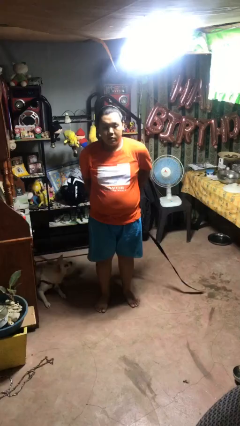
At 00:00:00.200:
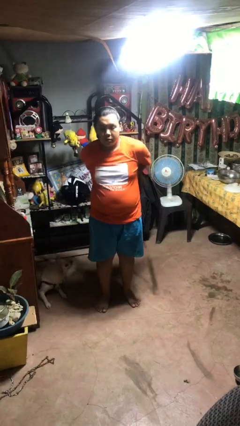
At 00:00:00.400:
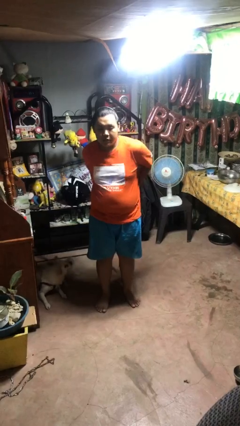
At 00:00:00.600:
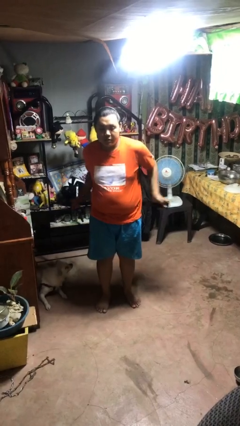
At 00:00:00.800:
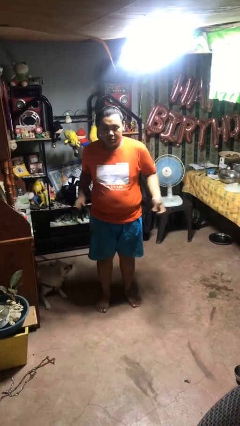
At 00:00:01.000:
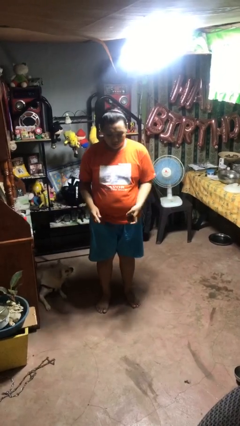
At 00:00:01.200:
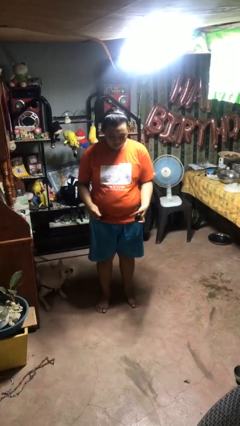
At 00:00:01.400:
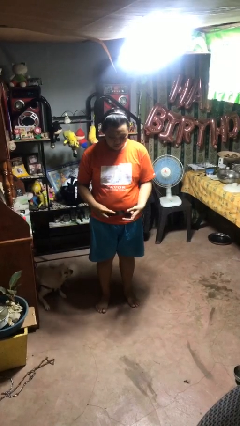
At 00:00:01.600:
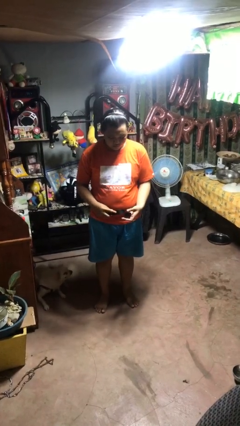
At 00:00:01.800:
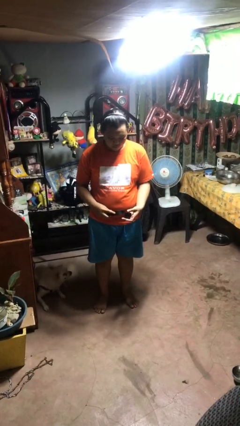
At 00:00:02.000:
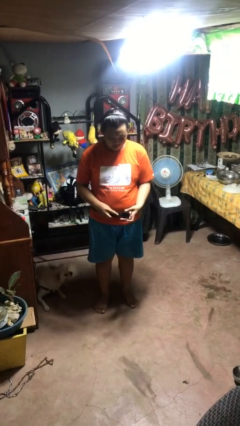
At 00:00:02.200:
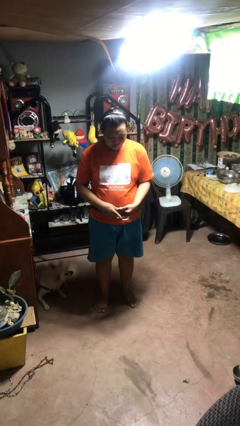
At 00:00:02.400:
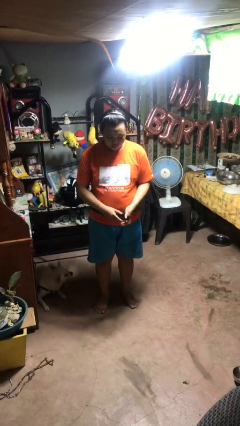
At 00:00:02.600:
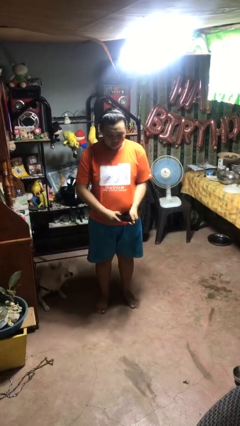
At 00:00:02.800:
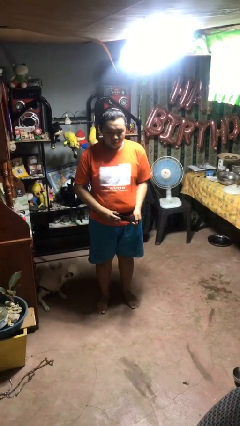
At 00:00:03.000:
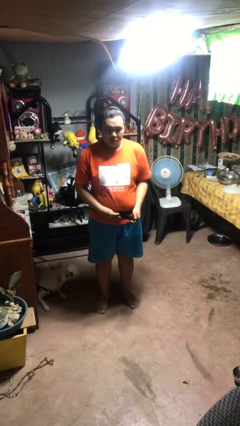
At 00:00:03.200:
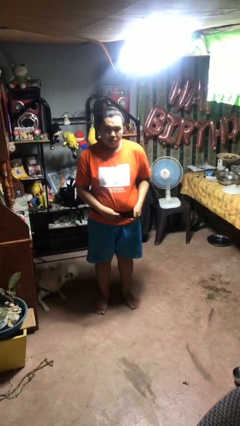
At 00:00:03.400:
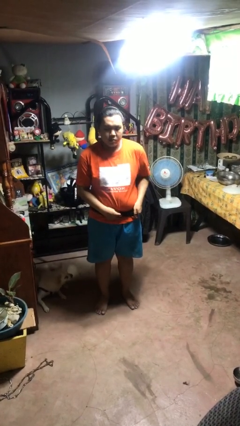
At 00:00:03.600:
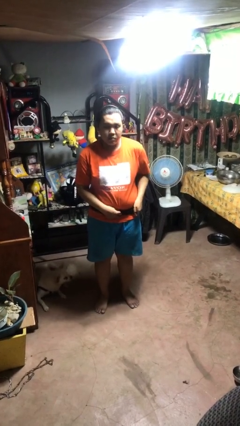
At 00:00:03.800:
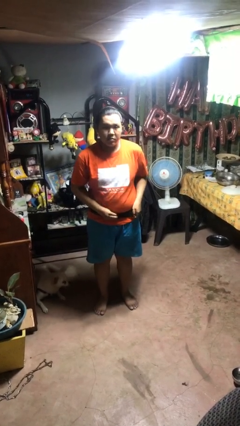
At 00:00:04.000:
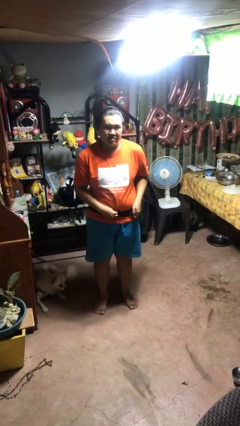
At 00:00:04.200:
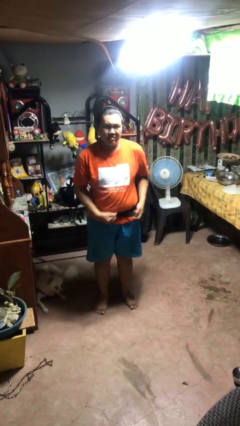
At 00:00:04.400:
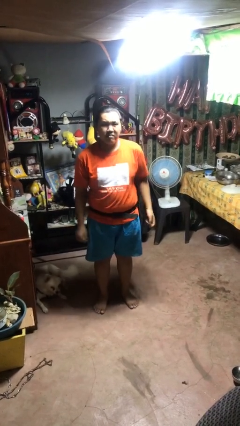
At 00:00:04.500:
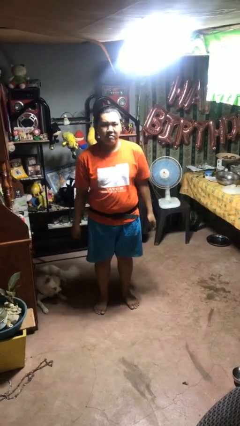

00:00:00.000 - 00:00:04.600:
person puts on belt

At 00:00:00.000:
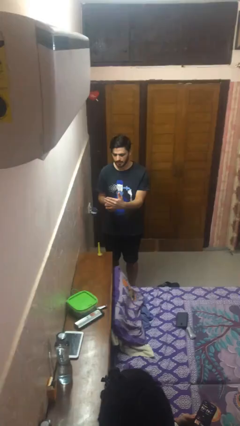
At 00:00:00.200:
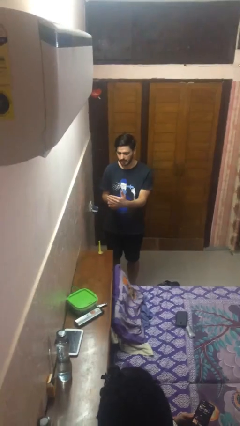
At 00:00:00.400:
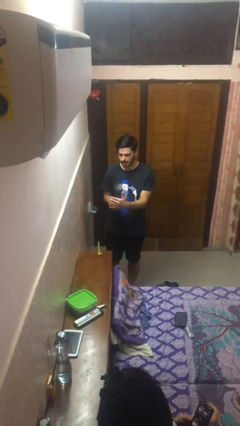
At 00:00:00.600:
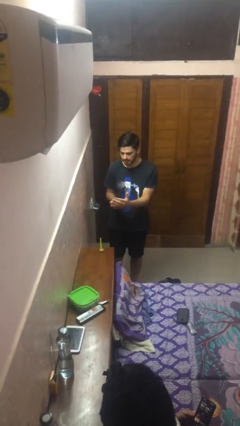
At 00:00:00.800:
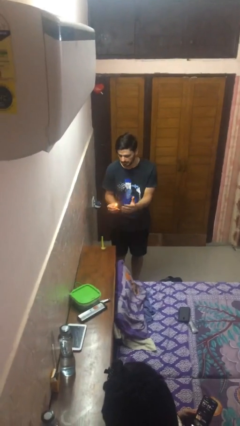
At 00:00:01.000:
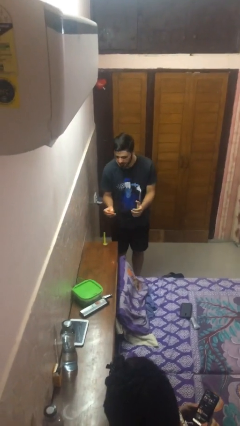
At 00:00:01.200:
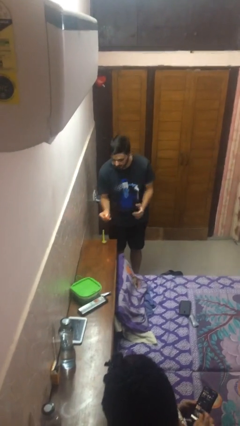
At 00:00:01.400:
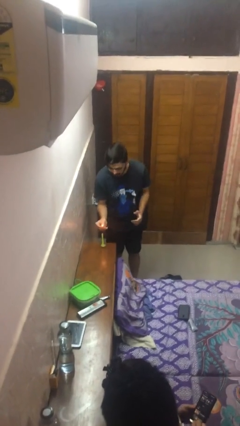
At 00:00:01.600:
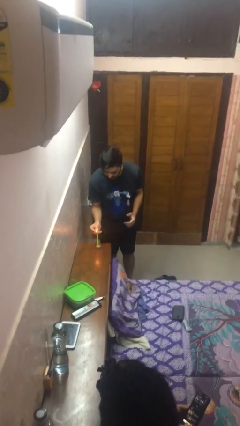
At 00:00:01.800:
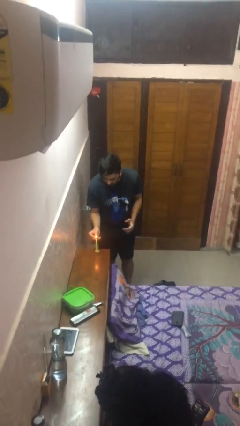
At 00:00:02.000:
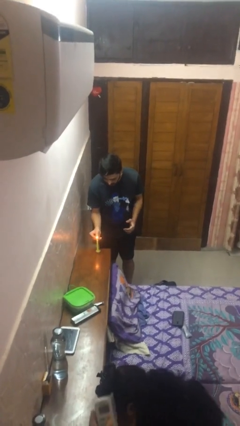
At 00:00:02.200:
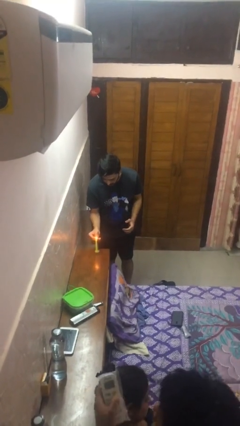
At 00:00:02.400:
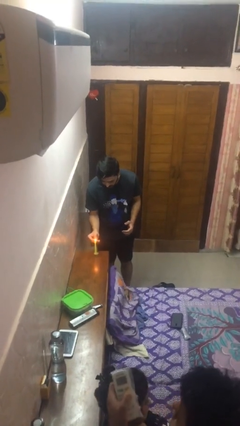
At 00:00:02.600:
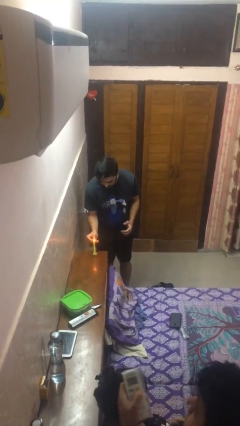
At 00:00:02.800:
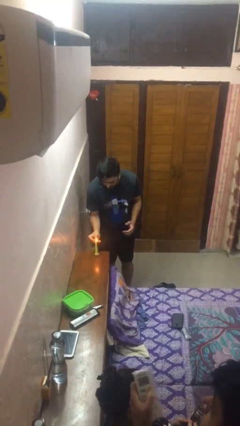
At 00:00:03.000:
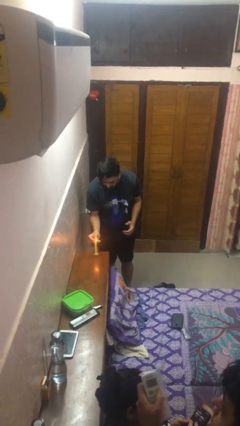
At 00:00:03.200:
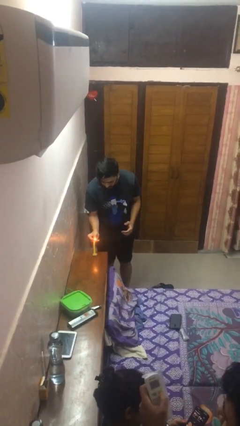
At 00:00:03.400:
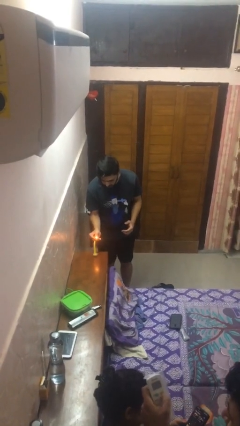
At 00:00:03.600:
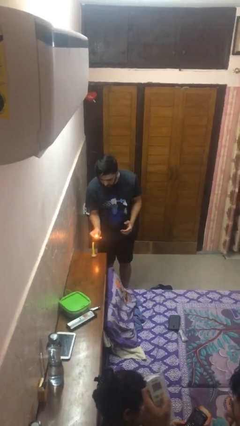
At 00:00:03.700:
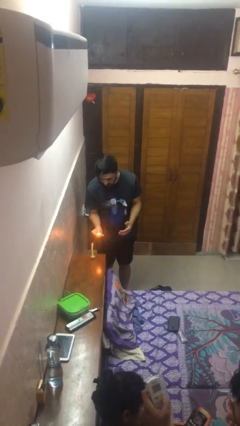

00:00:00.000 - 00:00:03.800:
person lights candle

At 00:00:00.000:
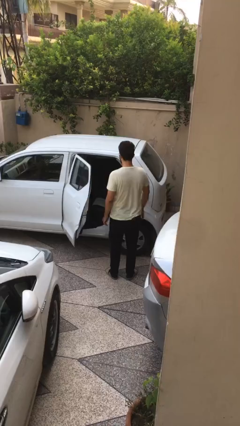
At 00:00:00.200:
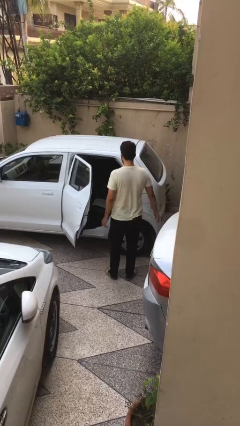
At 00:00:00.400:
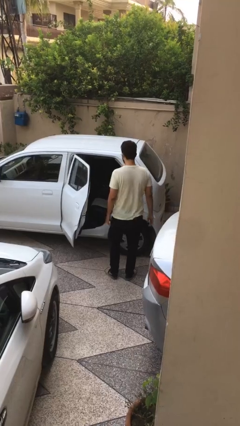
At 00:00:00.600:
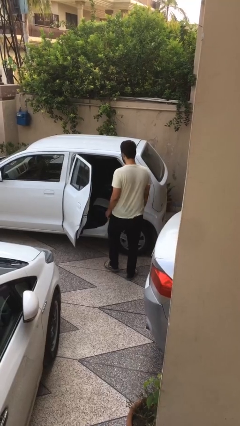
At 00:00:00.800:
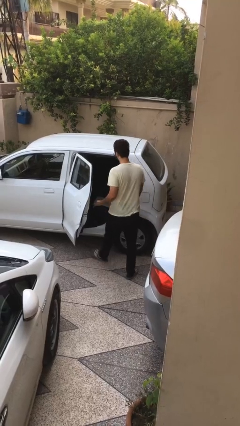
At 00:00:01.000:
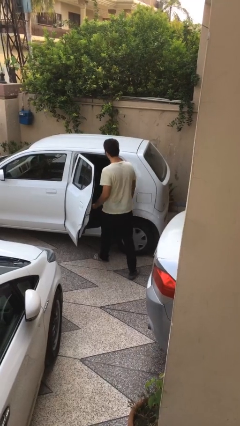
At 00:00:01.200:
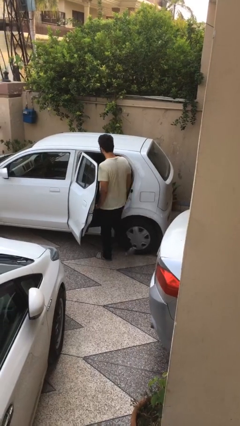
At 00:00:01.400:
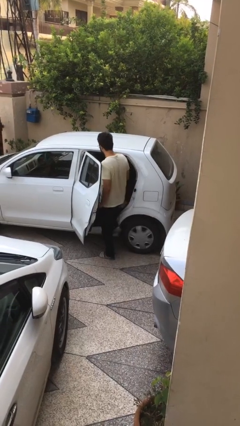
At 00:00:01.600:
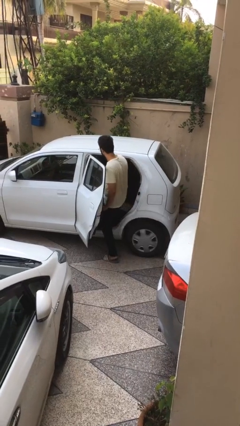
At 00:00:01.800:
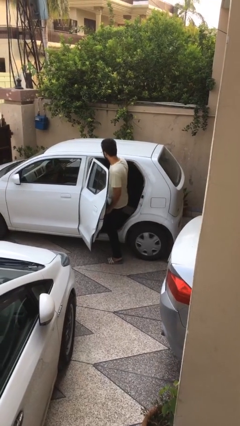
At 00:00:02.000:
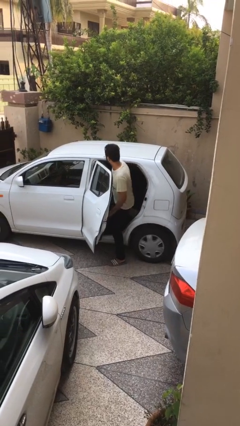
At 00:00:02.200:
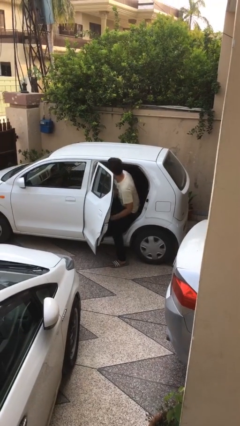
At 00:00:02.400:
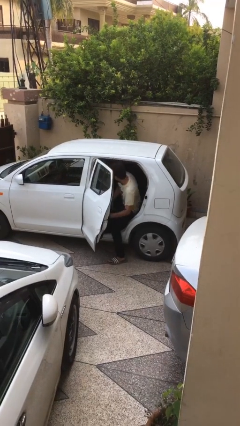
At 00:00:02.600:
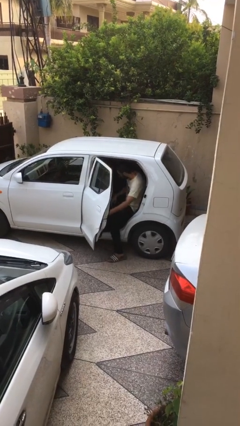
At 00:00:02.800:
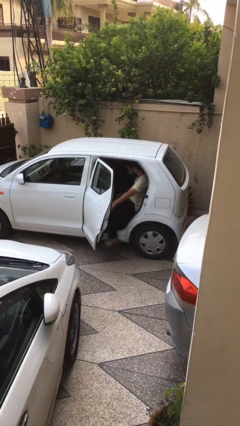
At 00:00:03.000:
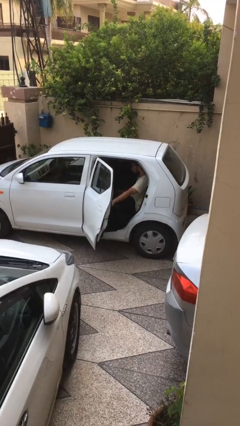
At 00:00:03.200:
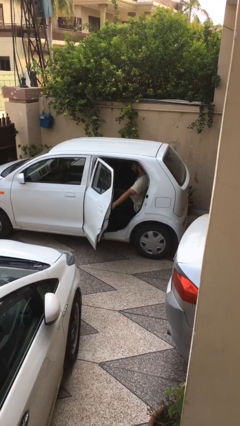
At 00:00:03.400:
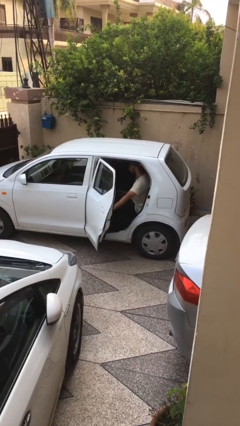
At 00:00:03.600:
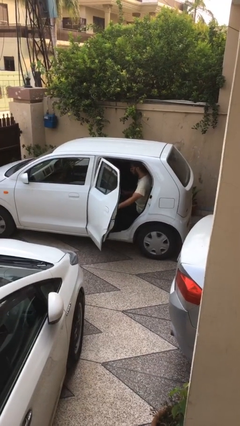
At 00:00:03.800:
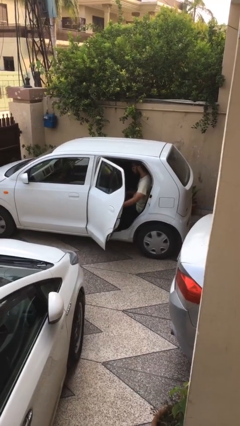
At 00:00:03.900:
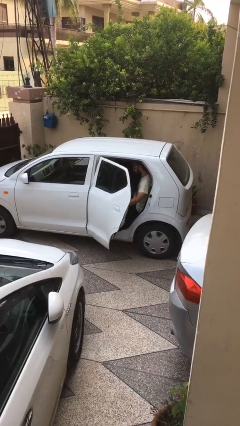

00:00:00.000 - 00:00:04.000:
person enters car

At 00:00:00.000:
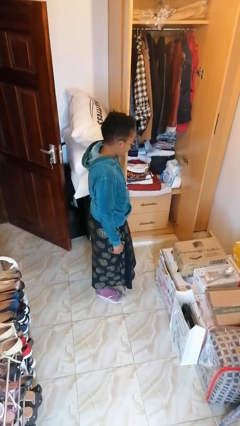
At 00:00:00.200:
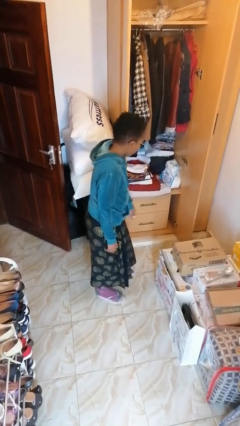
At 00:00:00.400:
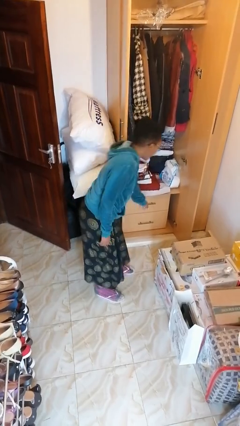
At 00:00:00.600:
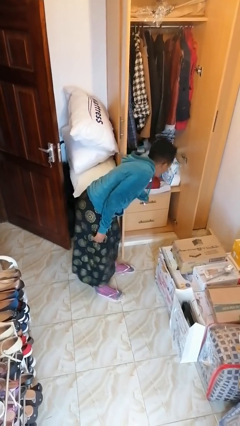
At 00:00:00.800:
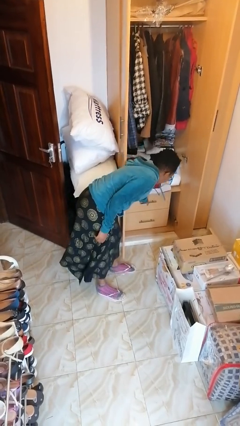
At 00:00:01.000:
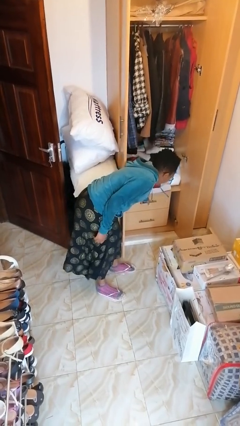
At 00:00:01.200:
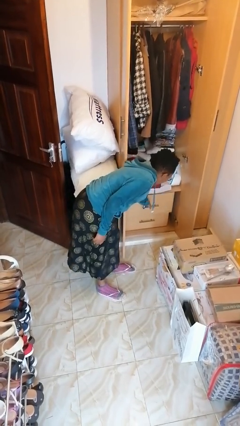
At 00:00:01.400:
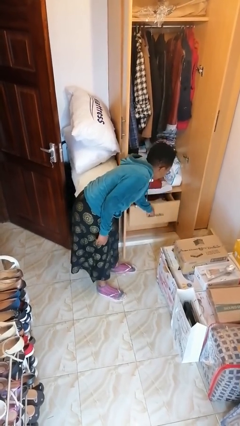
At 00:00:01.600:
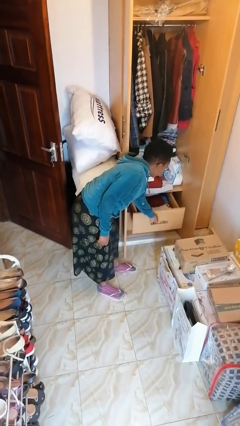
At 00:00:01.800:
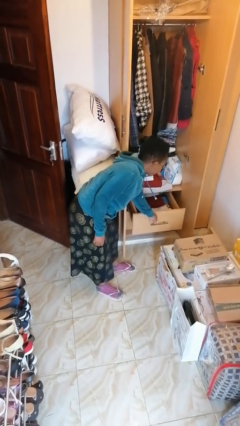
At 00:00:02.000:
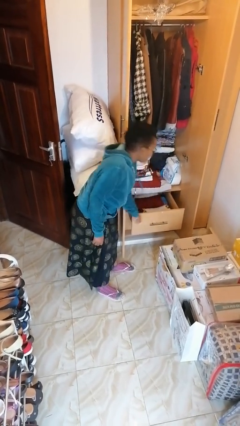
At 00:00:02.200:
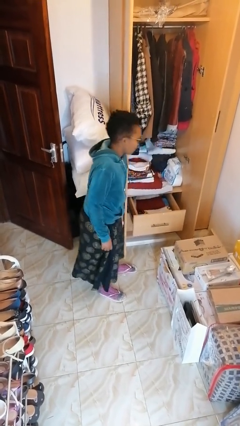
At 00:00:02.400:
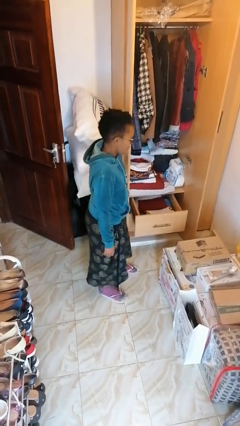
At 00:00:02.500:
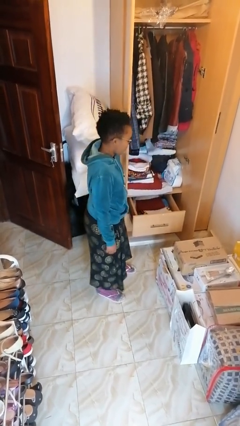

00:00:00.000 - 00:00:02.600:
person opens dresser drawer

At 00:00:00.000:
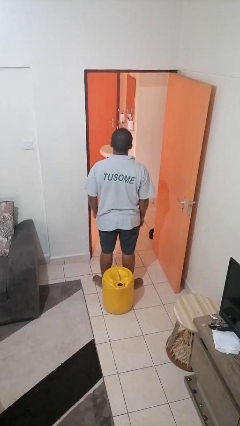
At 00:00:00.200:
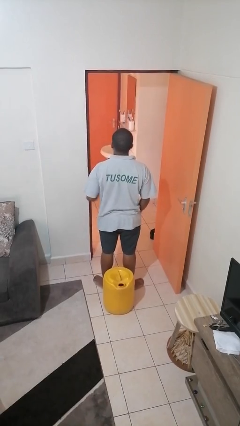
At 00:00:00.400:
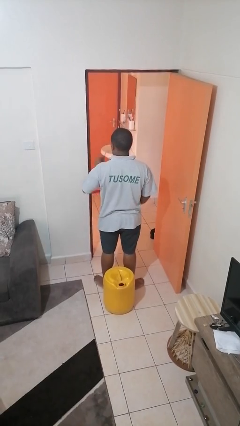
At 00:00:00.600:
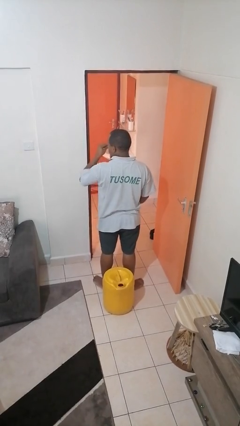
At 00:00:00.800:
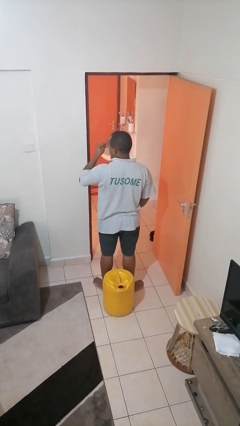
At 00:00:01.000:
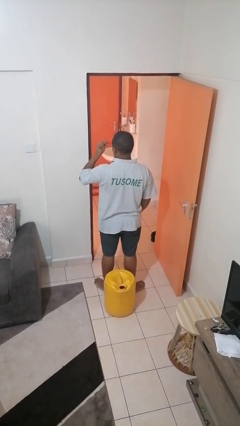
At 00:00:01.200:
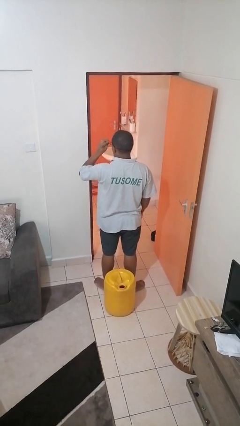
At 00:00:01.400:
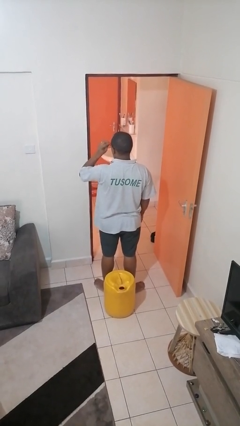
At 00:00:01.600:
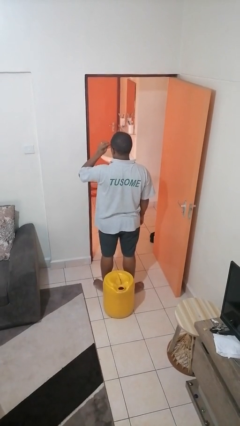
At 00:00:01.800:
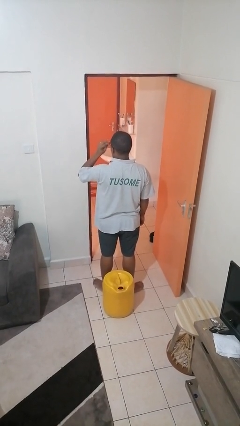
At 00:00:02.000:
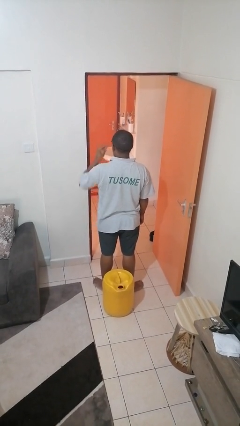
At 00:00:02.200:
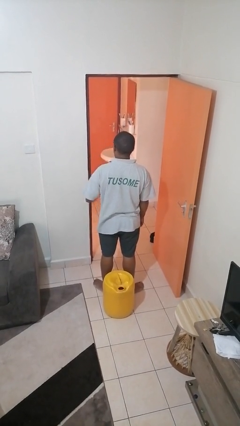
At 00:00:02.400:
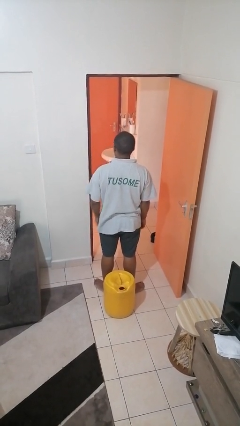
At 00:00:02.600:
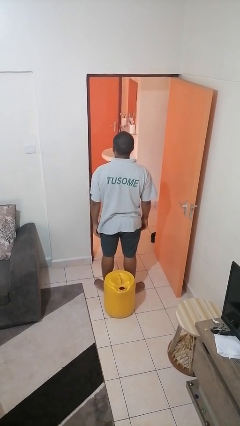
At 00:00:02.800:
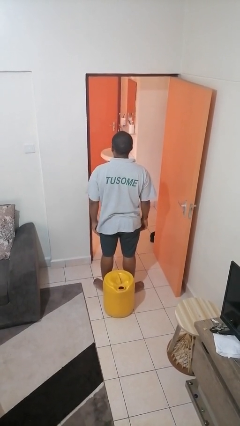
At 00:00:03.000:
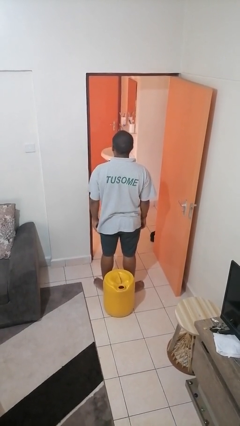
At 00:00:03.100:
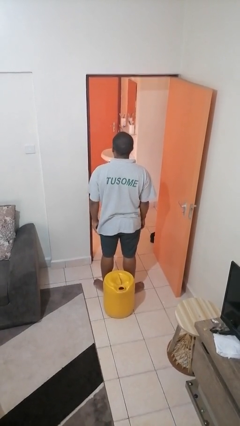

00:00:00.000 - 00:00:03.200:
person puts on glasses
